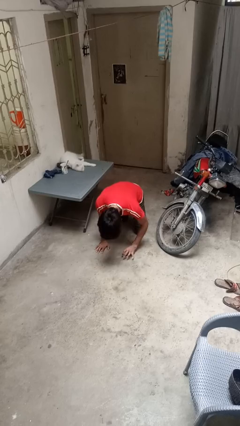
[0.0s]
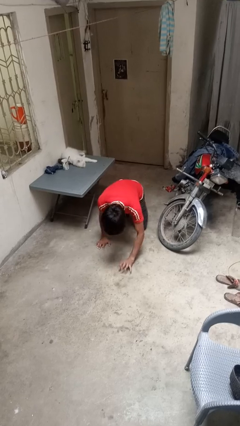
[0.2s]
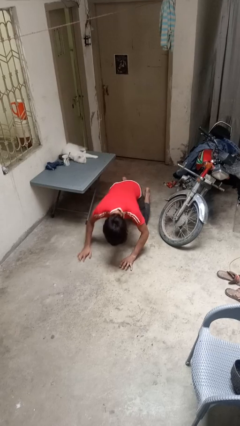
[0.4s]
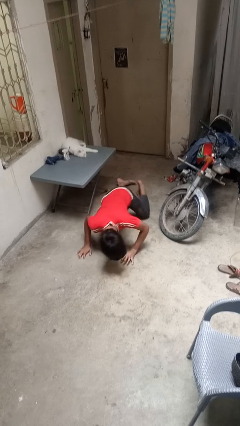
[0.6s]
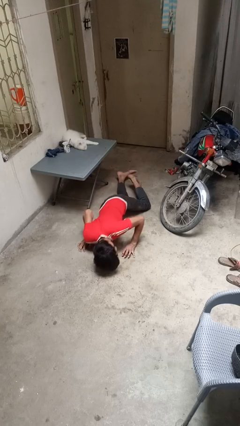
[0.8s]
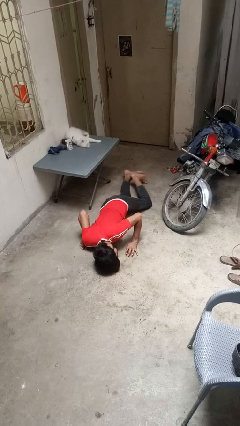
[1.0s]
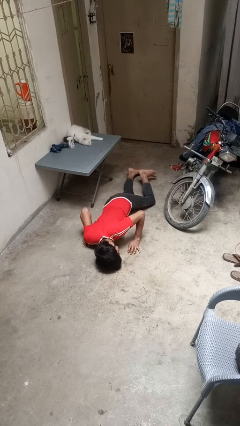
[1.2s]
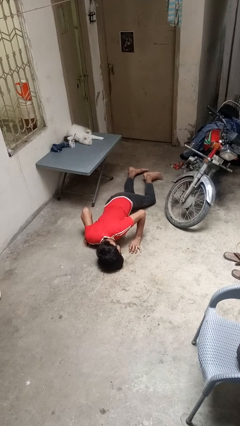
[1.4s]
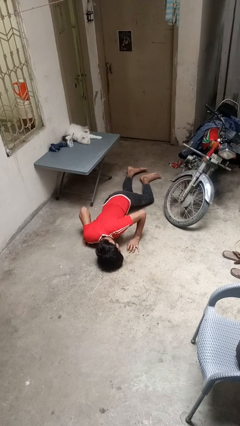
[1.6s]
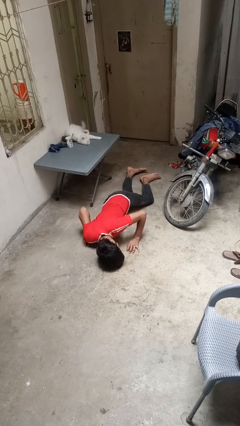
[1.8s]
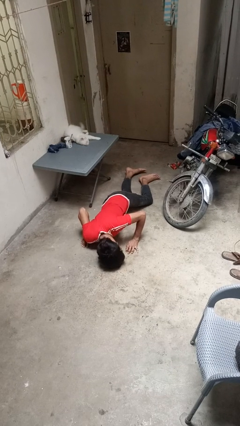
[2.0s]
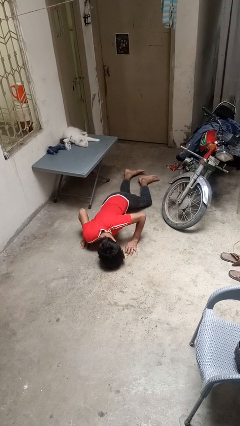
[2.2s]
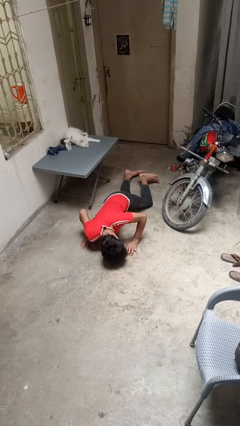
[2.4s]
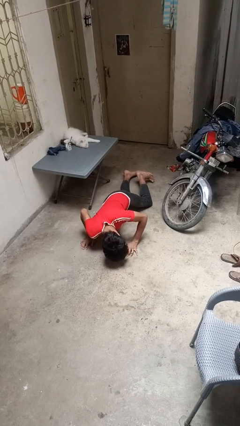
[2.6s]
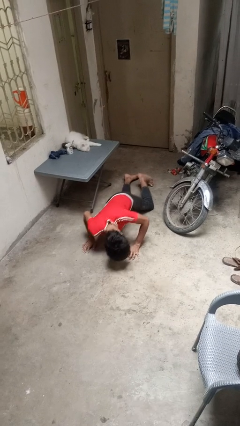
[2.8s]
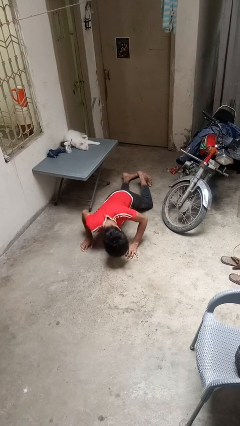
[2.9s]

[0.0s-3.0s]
person lies down on floor

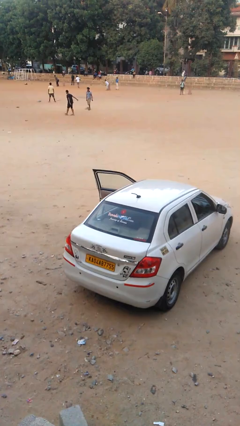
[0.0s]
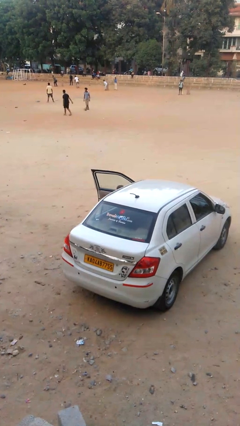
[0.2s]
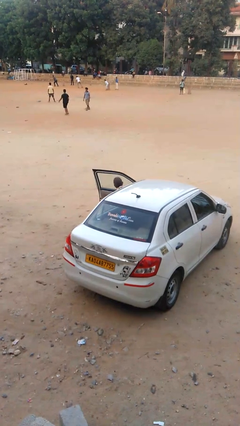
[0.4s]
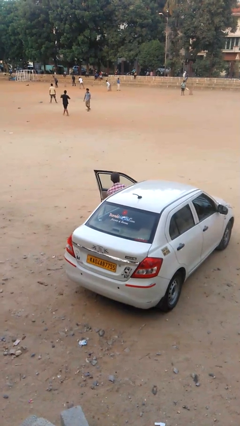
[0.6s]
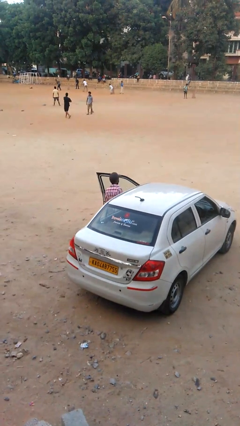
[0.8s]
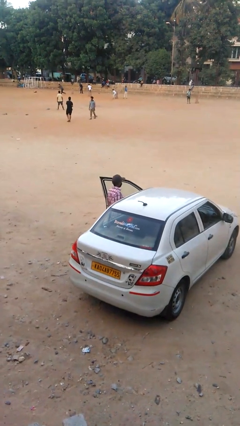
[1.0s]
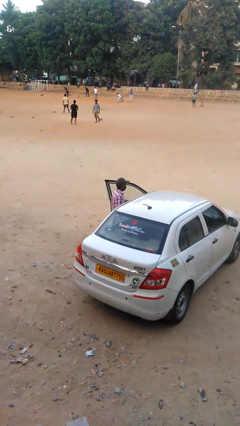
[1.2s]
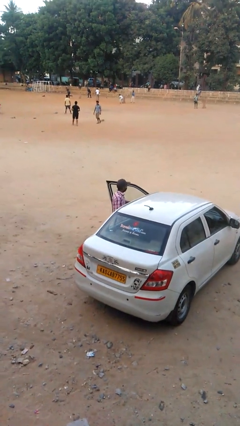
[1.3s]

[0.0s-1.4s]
person exits car

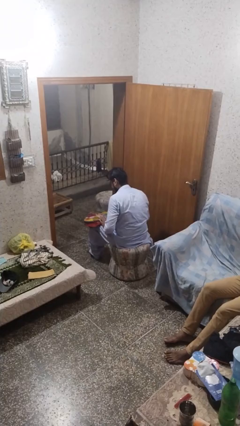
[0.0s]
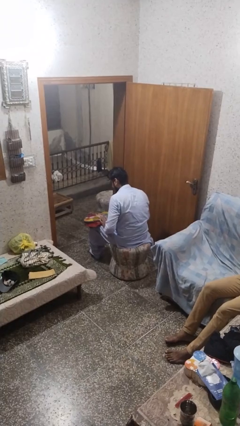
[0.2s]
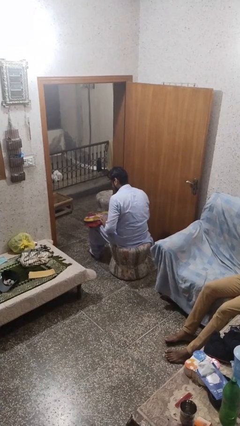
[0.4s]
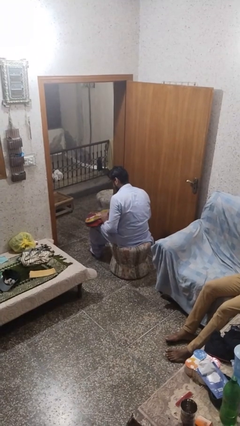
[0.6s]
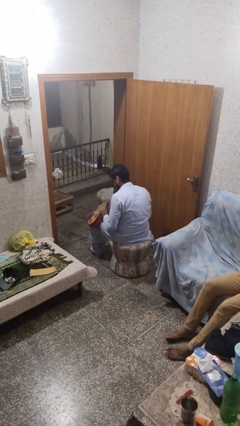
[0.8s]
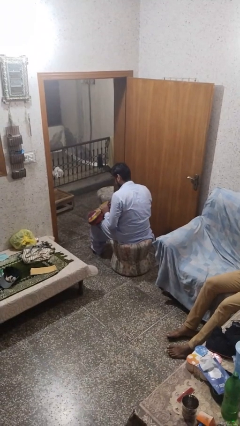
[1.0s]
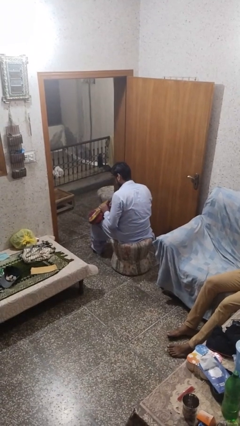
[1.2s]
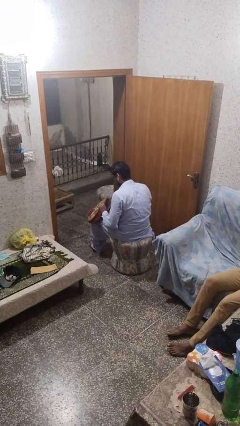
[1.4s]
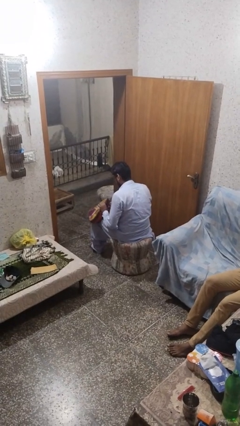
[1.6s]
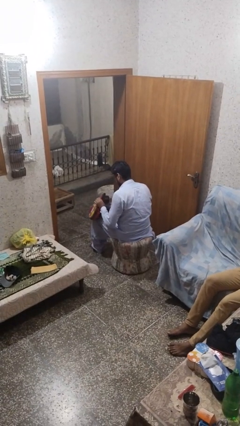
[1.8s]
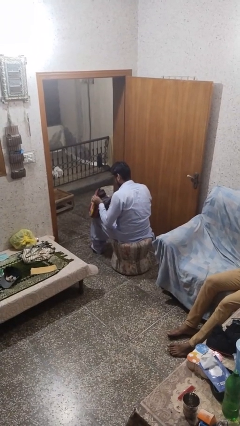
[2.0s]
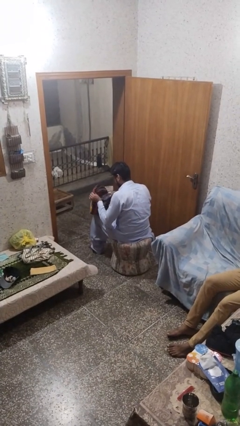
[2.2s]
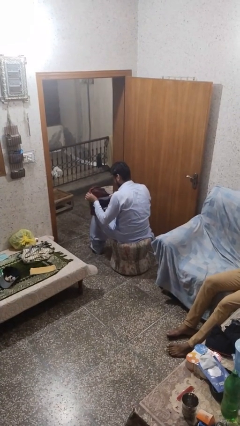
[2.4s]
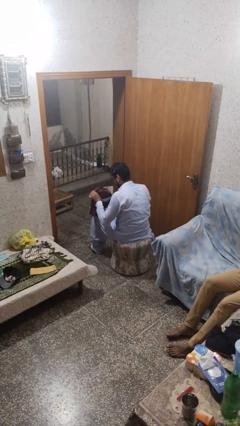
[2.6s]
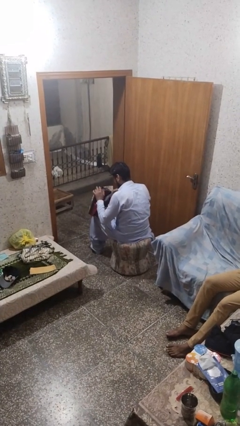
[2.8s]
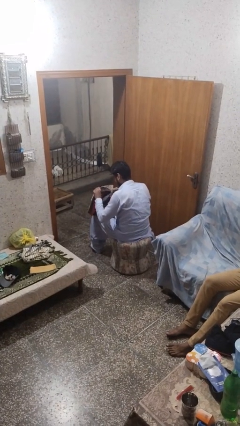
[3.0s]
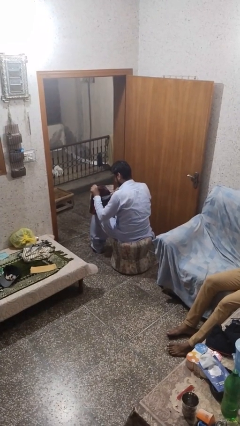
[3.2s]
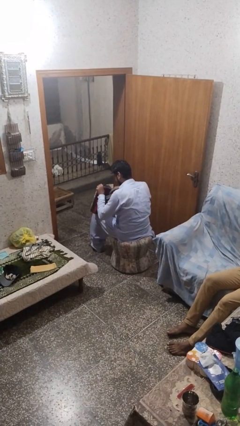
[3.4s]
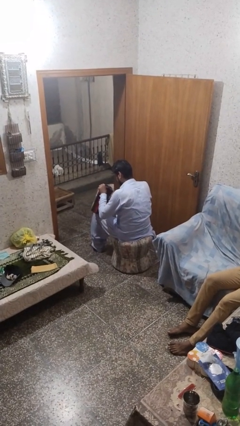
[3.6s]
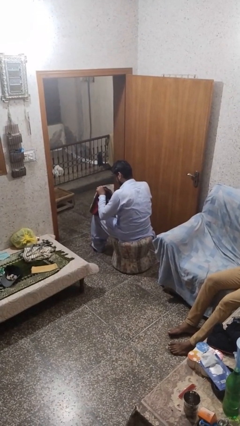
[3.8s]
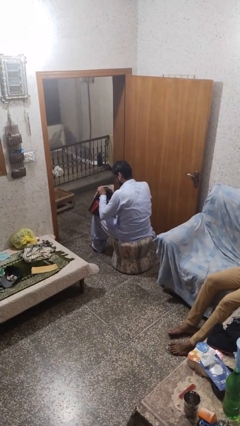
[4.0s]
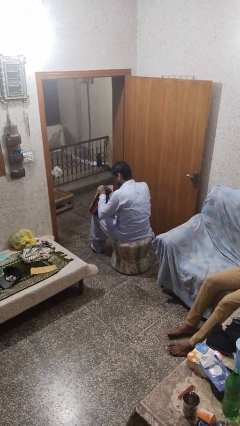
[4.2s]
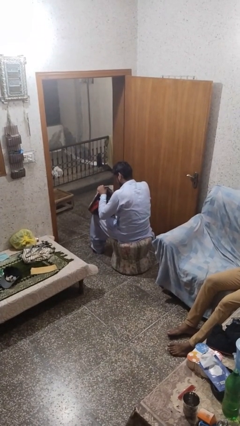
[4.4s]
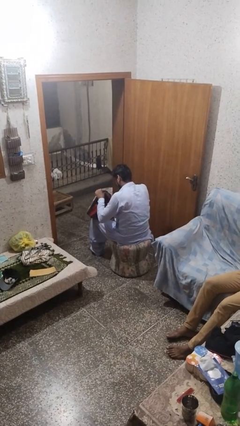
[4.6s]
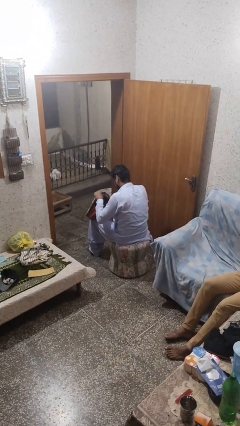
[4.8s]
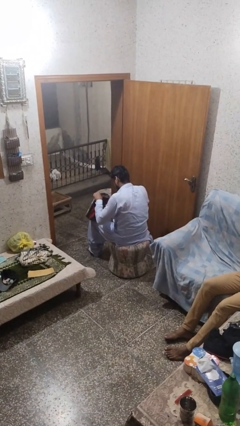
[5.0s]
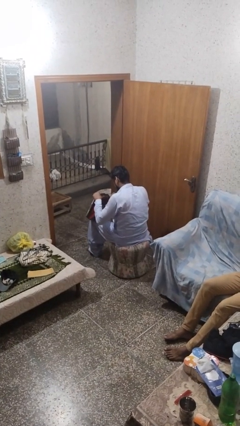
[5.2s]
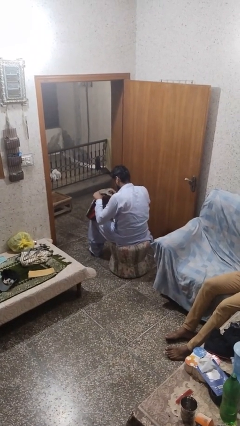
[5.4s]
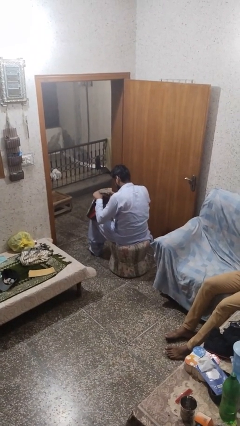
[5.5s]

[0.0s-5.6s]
person searches in backpack

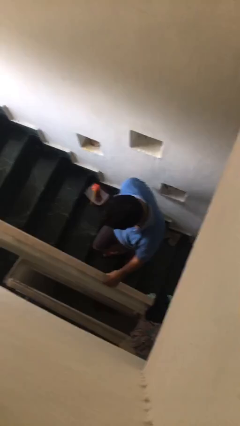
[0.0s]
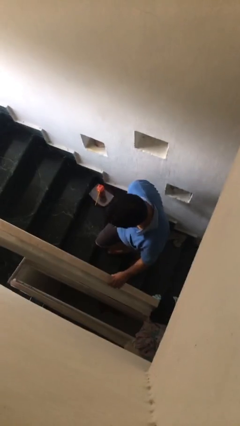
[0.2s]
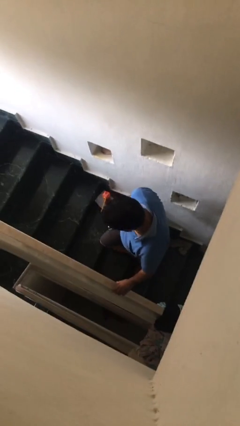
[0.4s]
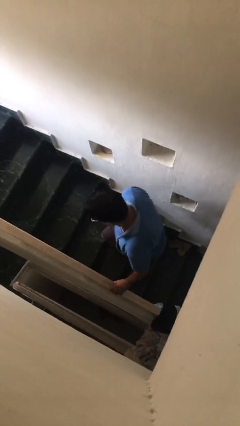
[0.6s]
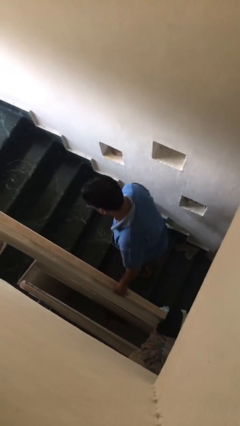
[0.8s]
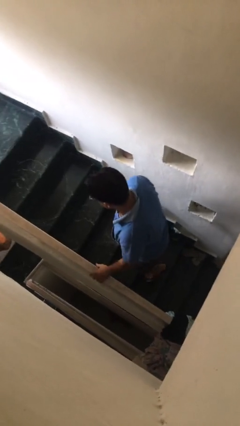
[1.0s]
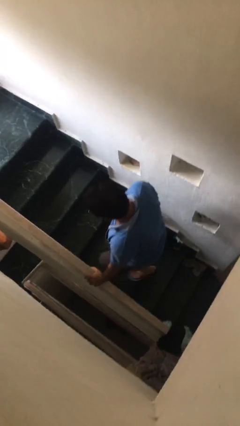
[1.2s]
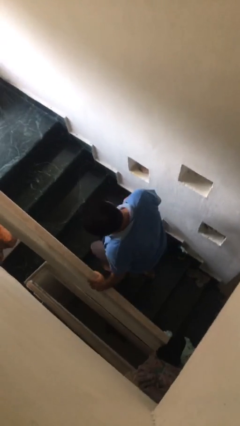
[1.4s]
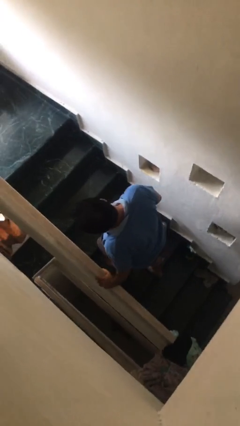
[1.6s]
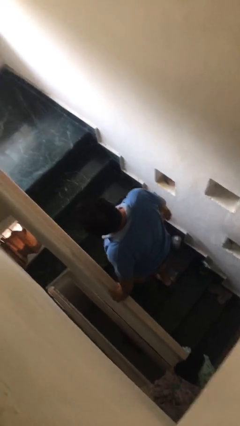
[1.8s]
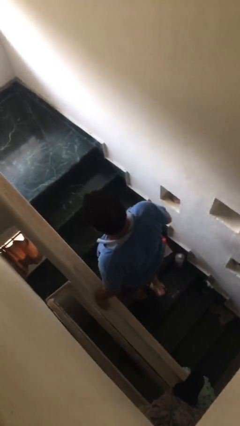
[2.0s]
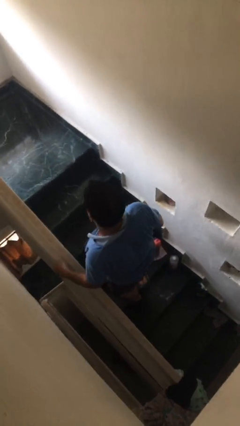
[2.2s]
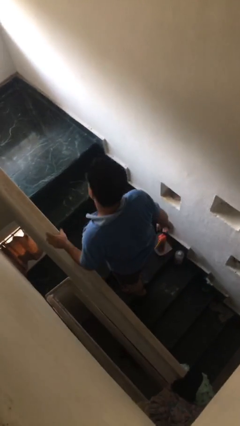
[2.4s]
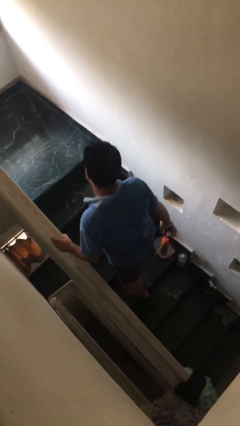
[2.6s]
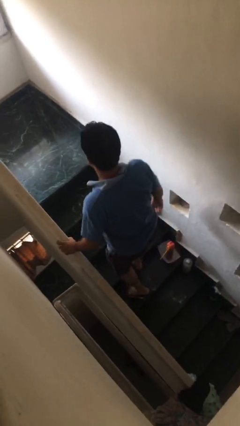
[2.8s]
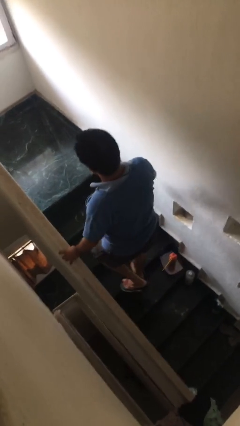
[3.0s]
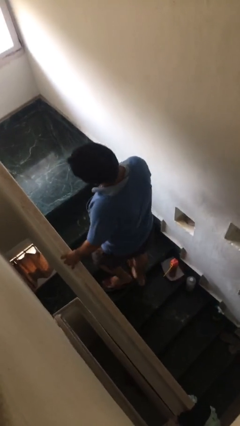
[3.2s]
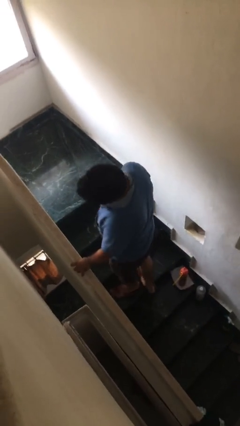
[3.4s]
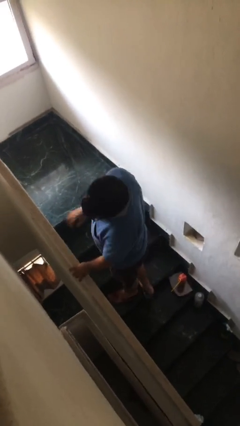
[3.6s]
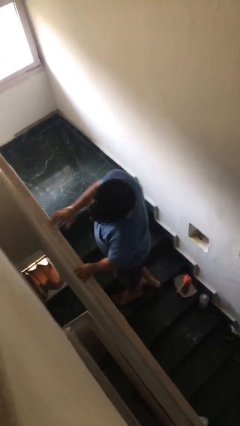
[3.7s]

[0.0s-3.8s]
person climbs up stairs

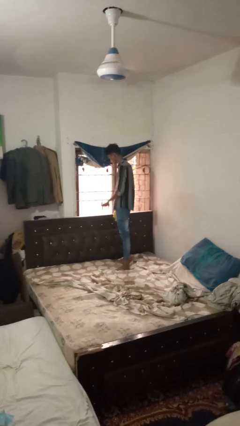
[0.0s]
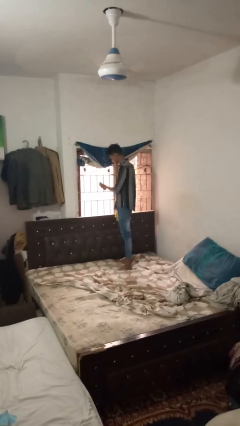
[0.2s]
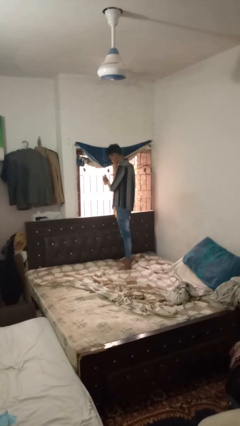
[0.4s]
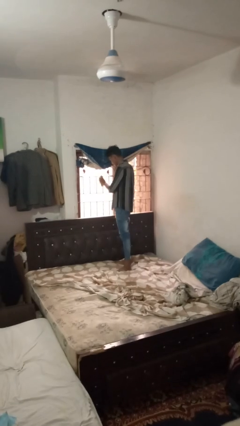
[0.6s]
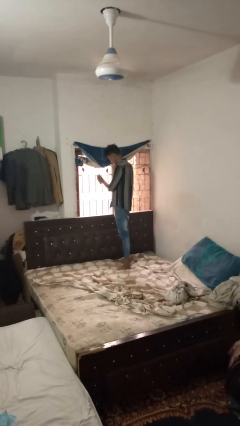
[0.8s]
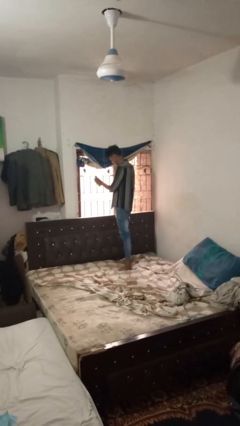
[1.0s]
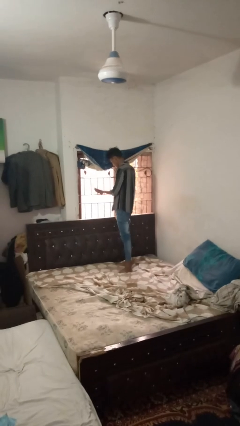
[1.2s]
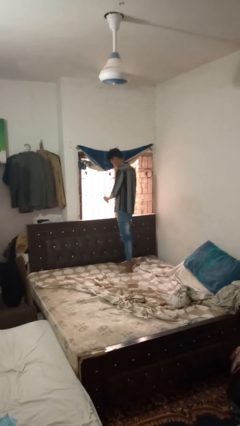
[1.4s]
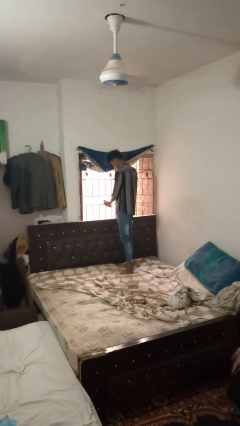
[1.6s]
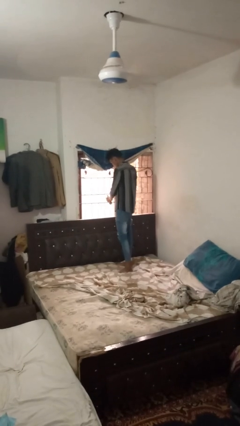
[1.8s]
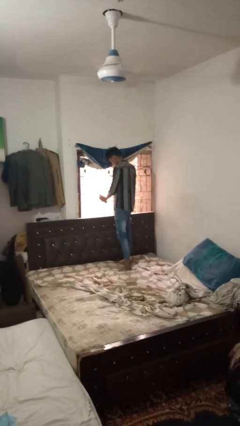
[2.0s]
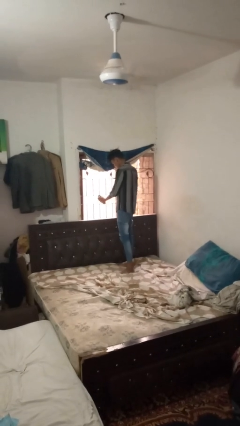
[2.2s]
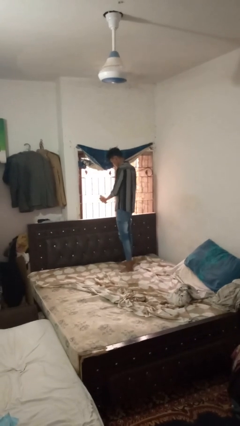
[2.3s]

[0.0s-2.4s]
person sprays from bottle

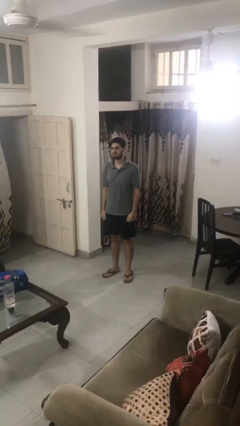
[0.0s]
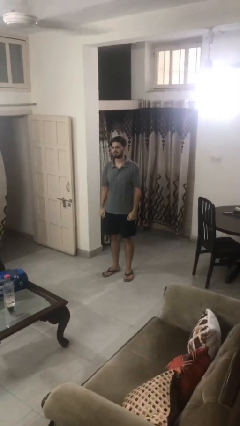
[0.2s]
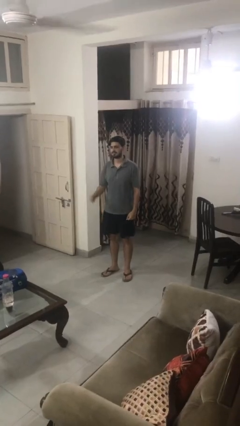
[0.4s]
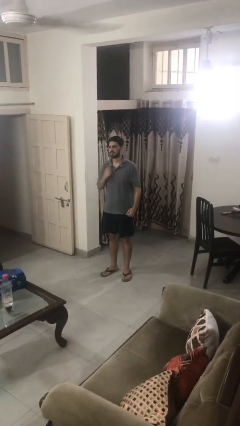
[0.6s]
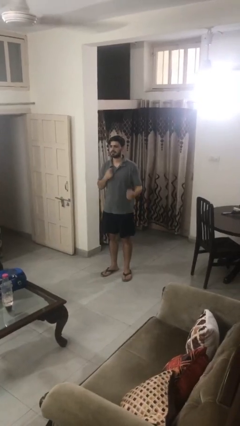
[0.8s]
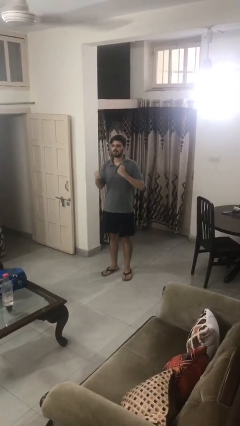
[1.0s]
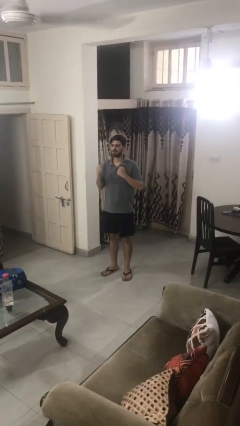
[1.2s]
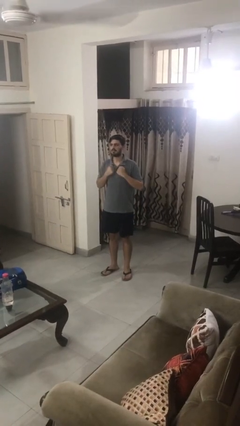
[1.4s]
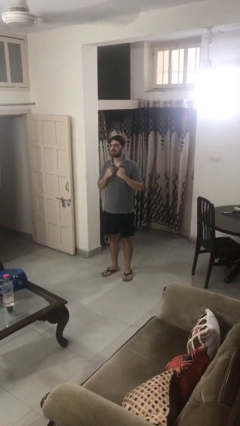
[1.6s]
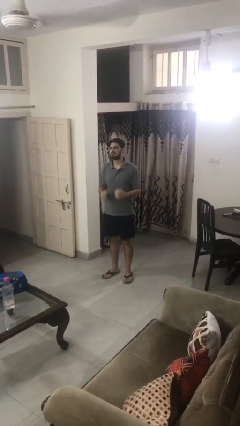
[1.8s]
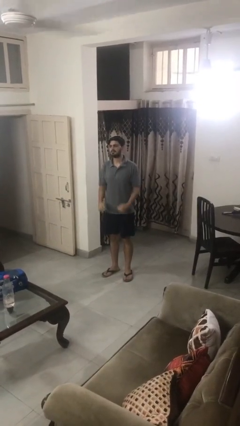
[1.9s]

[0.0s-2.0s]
person drums on chest
